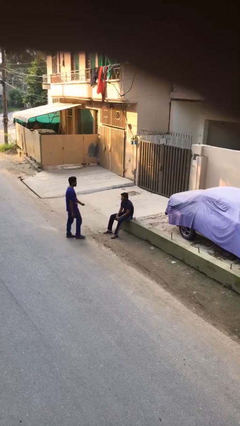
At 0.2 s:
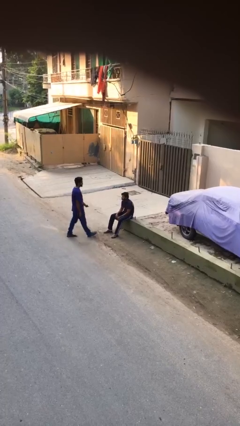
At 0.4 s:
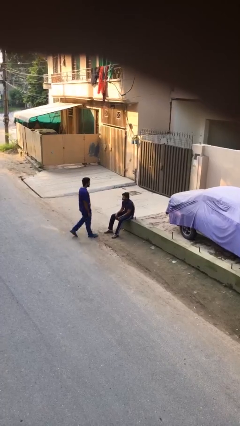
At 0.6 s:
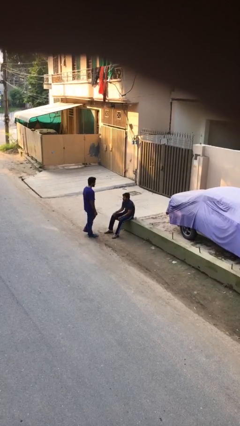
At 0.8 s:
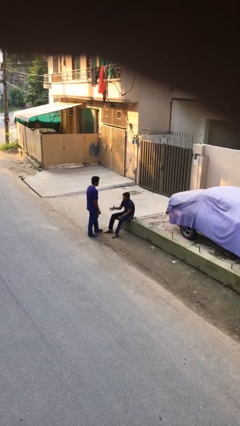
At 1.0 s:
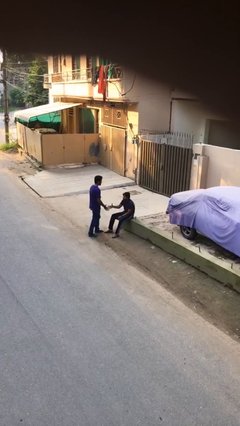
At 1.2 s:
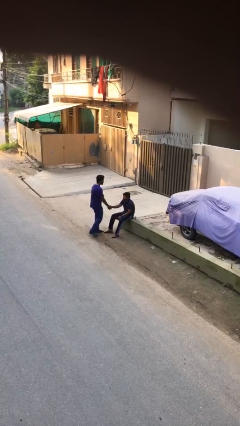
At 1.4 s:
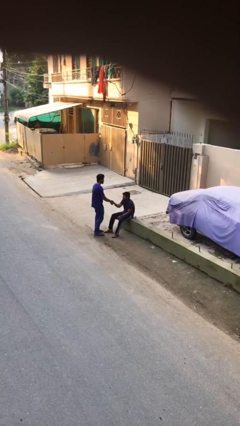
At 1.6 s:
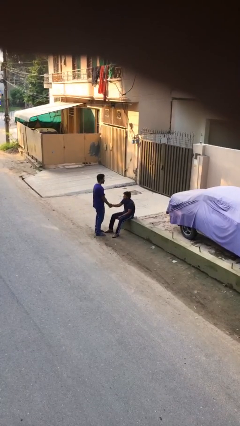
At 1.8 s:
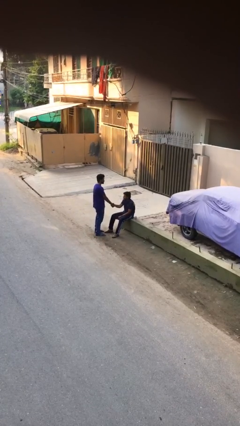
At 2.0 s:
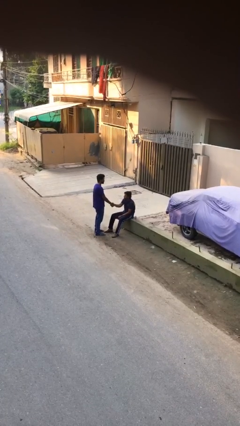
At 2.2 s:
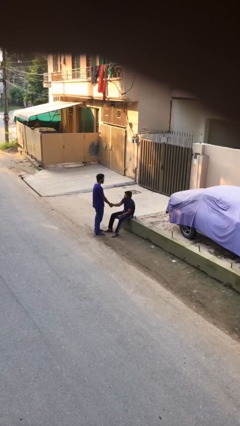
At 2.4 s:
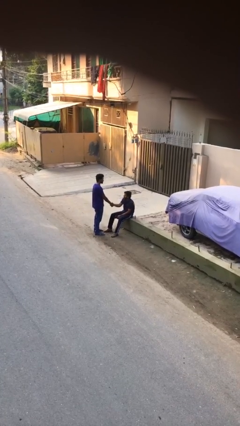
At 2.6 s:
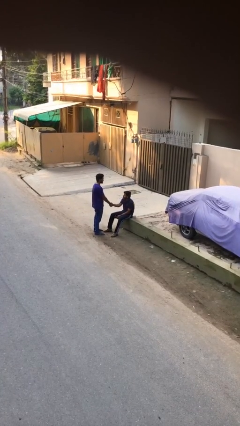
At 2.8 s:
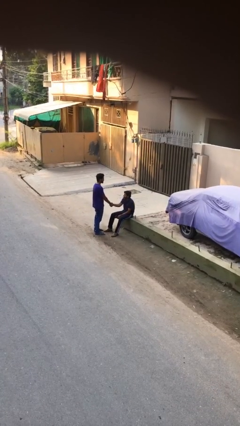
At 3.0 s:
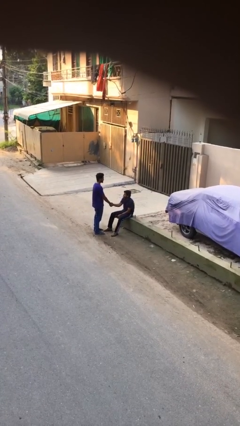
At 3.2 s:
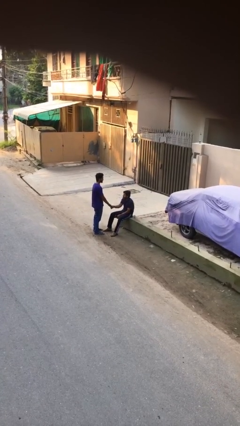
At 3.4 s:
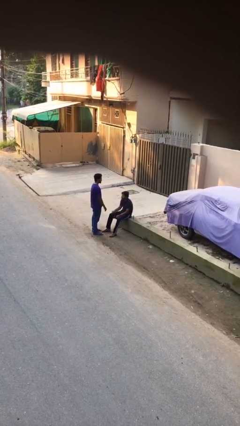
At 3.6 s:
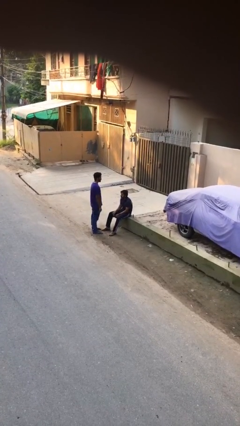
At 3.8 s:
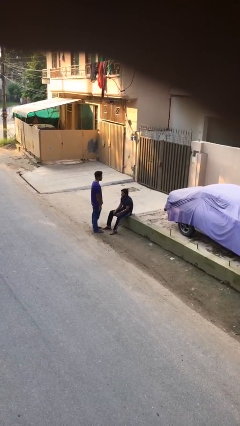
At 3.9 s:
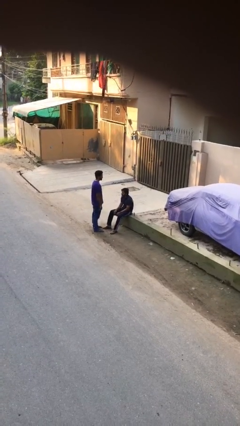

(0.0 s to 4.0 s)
person shakes hand

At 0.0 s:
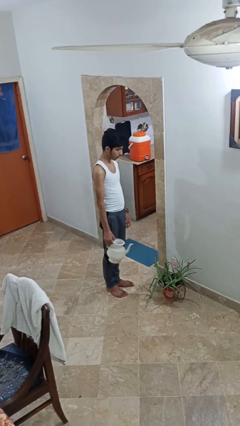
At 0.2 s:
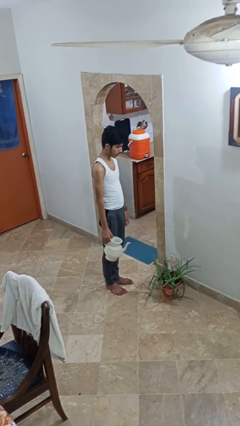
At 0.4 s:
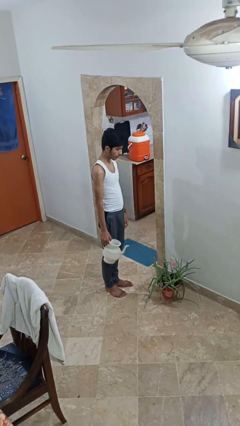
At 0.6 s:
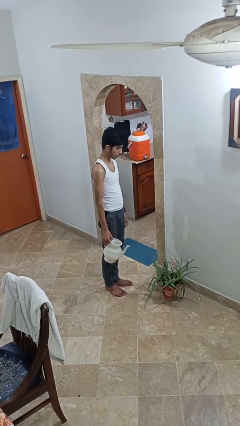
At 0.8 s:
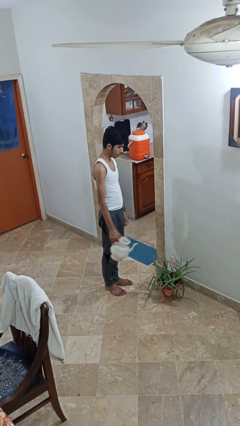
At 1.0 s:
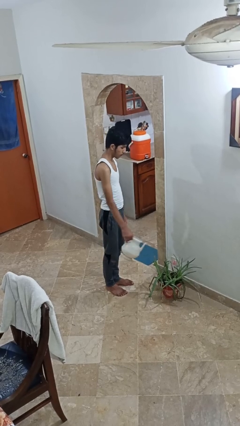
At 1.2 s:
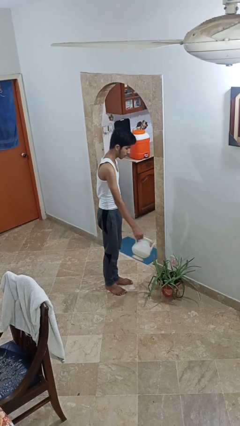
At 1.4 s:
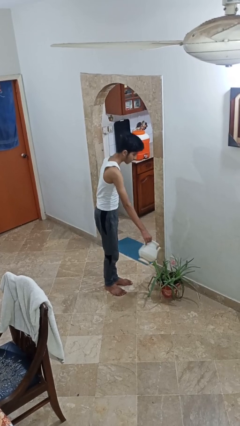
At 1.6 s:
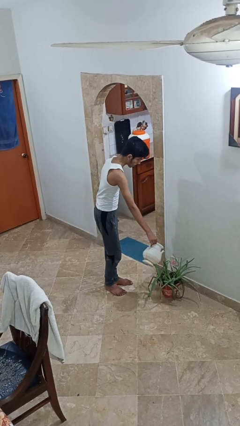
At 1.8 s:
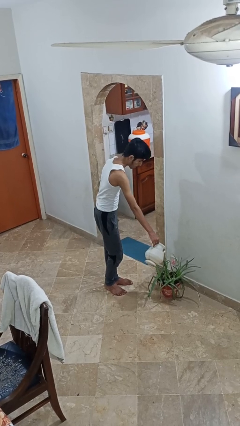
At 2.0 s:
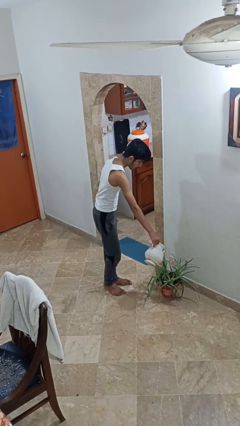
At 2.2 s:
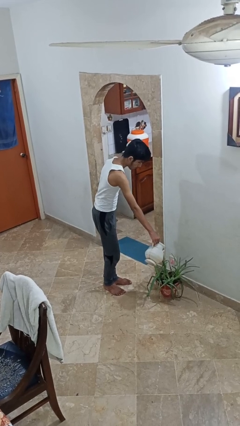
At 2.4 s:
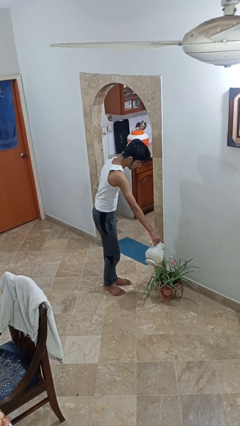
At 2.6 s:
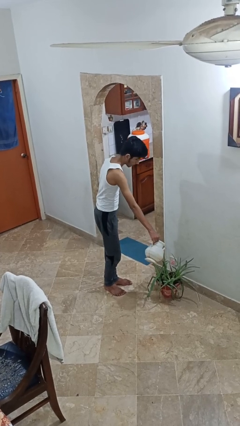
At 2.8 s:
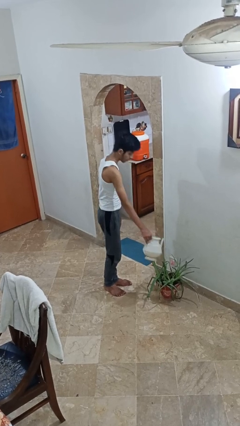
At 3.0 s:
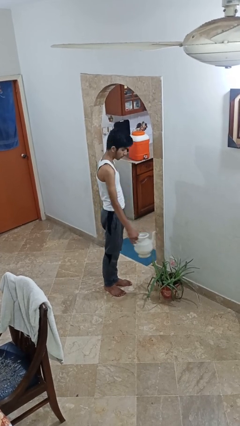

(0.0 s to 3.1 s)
person waters houseplant

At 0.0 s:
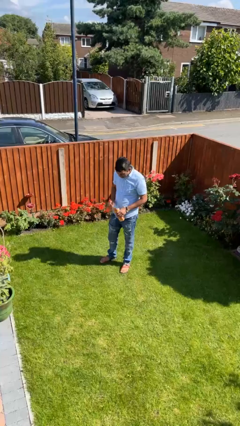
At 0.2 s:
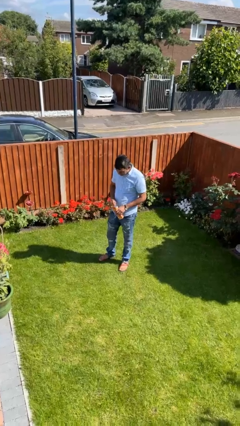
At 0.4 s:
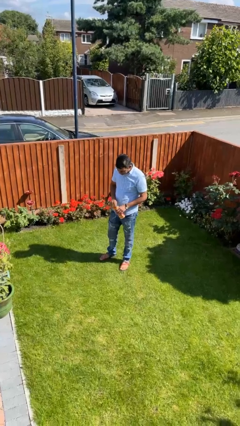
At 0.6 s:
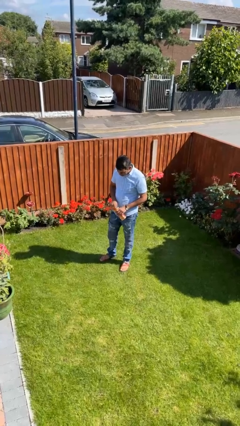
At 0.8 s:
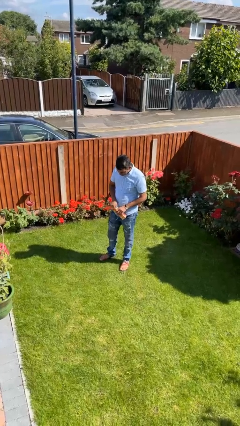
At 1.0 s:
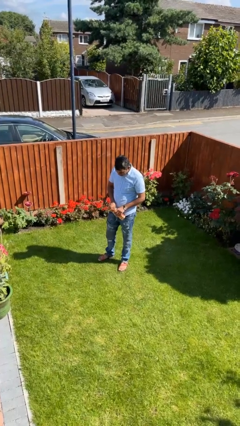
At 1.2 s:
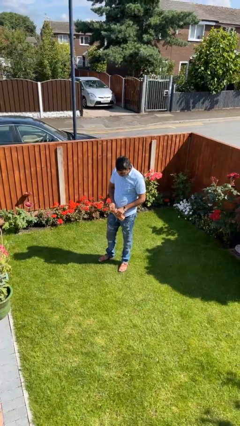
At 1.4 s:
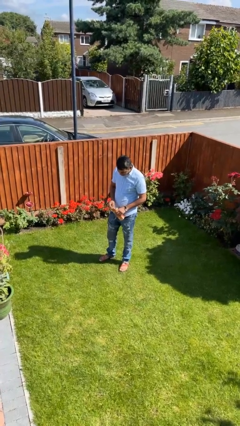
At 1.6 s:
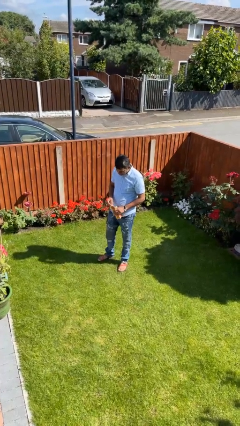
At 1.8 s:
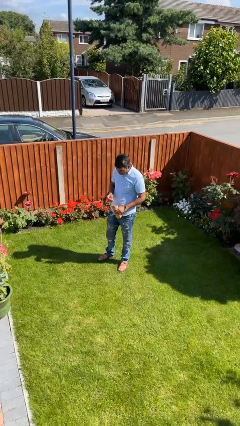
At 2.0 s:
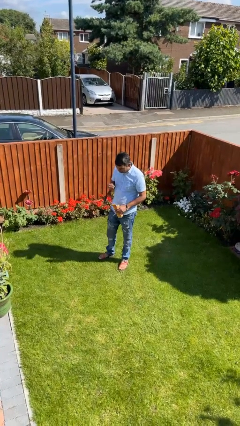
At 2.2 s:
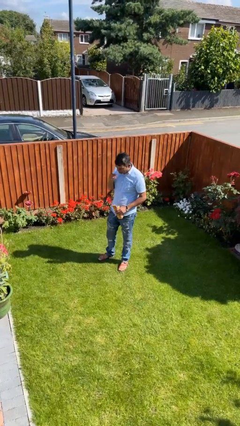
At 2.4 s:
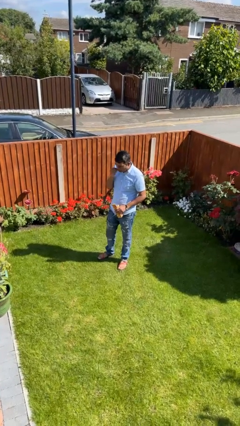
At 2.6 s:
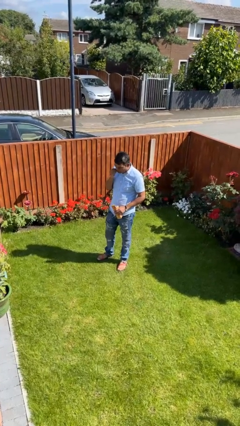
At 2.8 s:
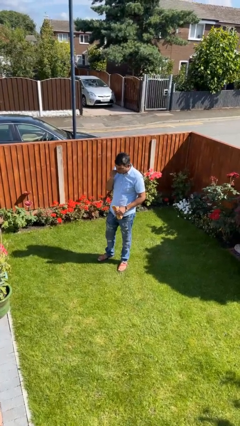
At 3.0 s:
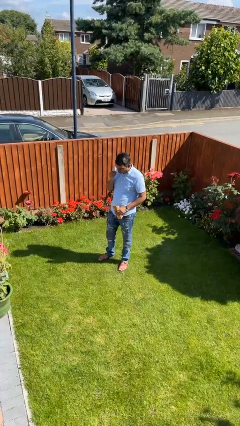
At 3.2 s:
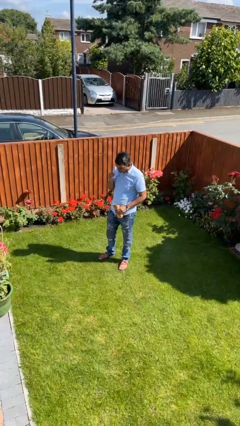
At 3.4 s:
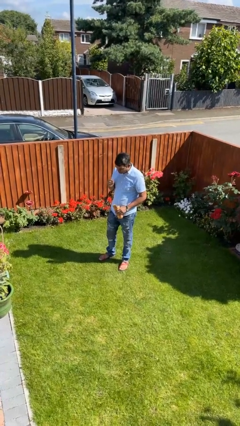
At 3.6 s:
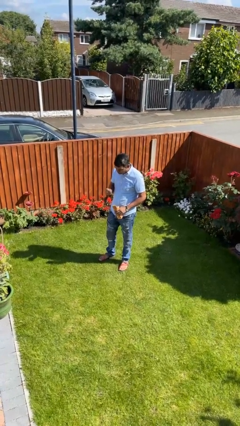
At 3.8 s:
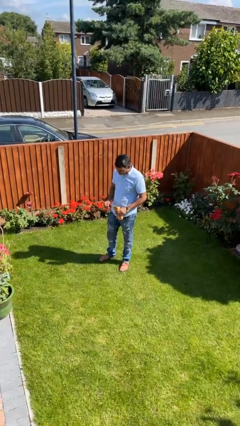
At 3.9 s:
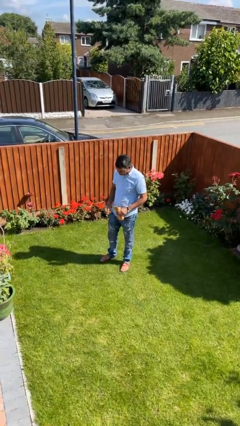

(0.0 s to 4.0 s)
person eats snack from bag

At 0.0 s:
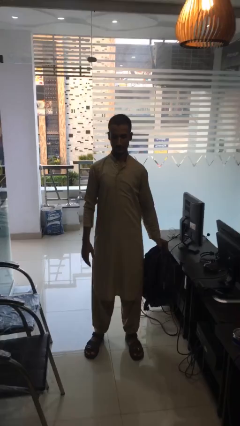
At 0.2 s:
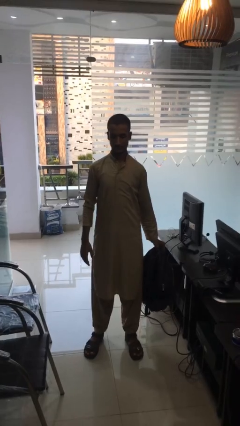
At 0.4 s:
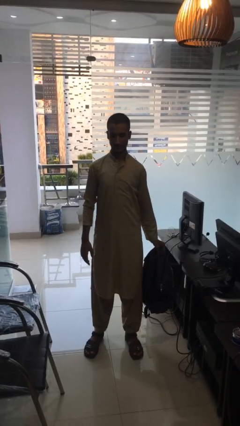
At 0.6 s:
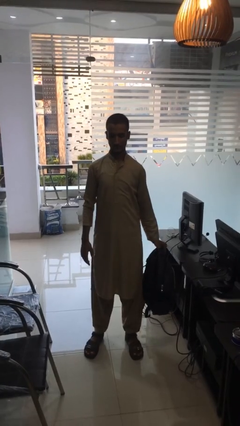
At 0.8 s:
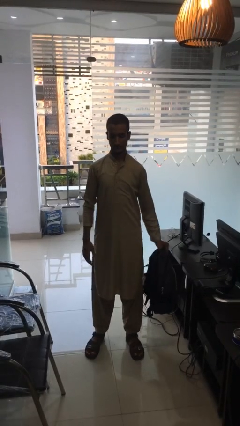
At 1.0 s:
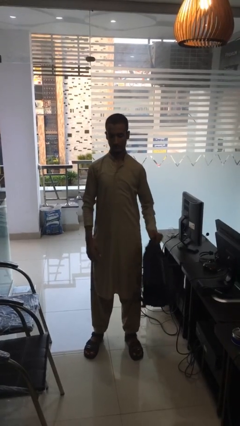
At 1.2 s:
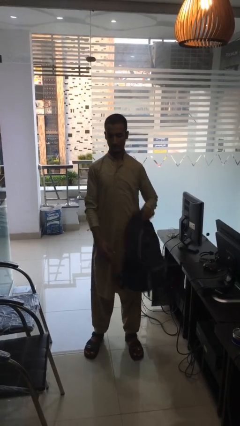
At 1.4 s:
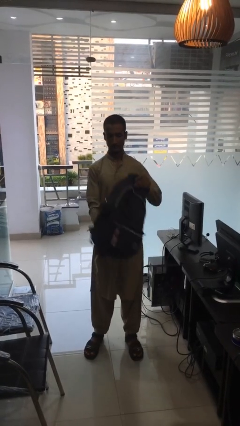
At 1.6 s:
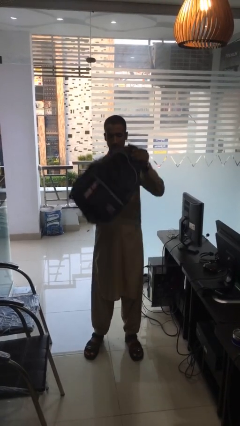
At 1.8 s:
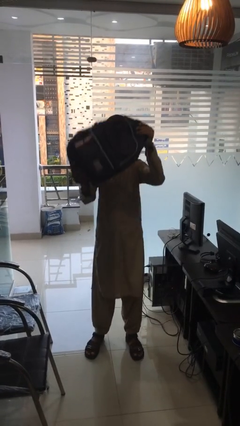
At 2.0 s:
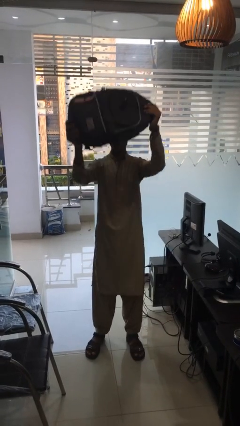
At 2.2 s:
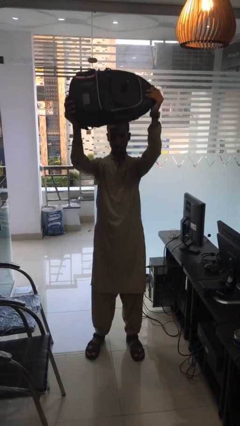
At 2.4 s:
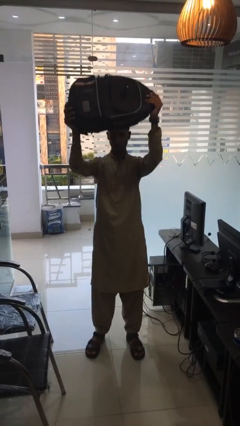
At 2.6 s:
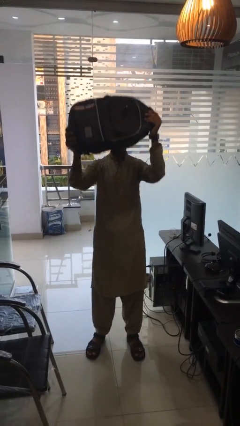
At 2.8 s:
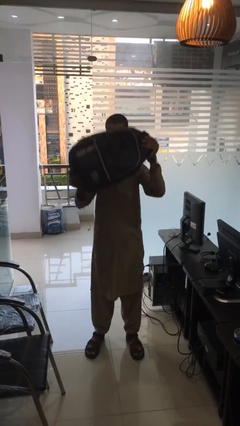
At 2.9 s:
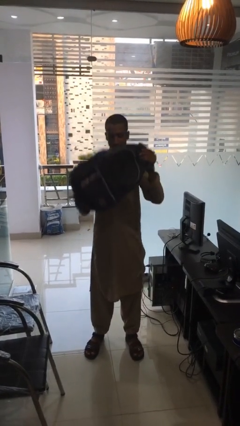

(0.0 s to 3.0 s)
person holds object above head

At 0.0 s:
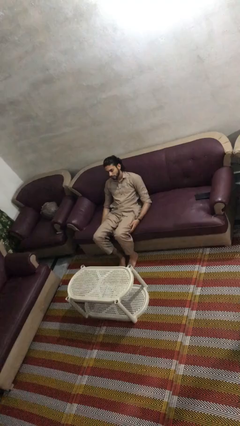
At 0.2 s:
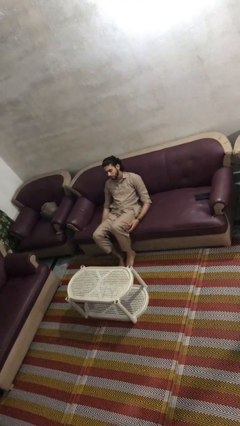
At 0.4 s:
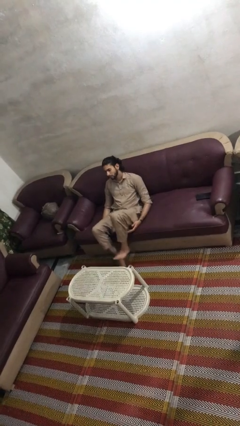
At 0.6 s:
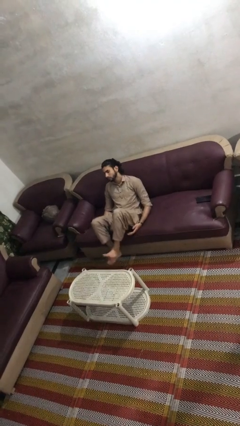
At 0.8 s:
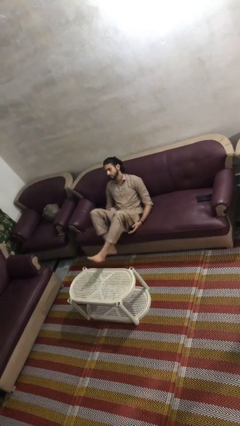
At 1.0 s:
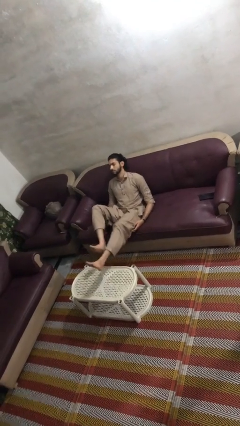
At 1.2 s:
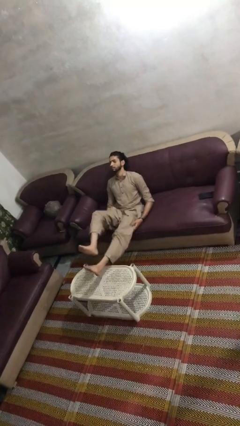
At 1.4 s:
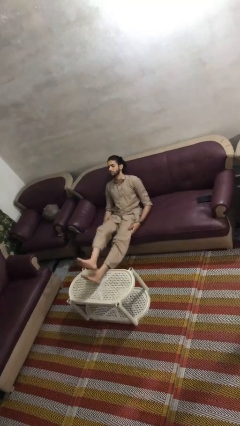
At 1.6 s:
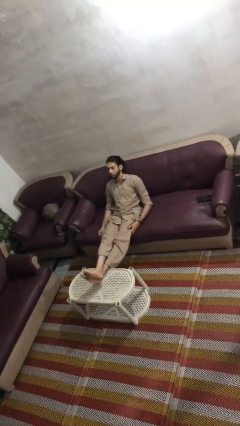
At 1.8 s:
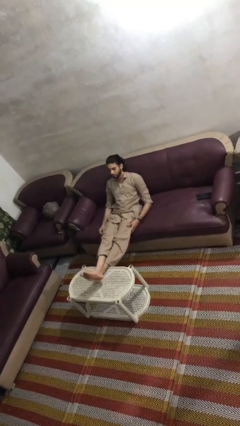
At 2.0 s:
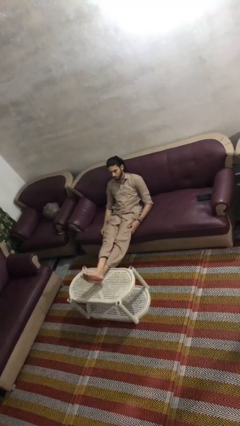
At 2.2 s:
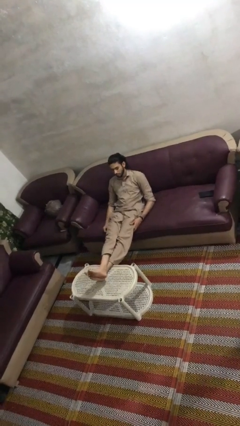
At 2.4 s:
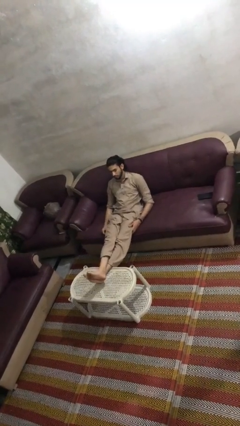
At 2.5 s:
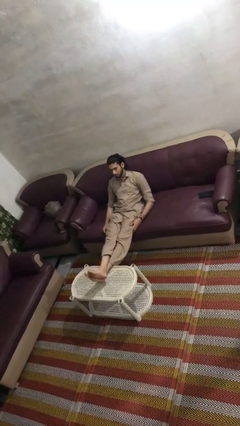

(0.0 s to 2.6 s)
person puts feet up

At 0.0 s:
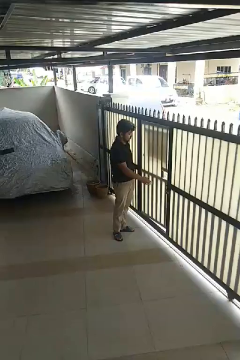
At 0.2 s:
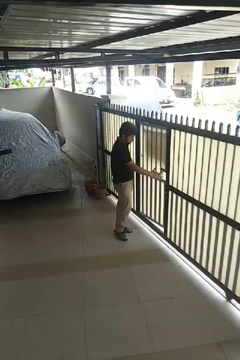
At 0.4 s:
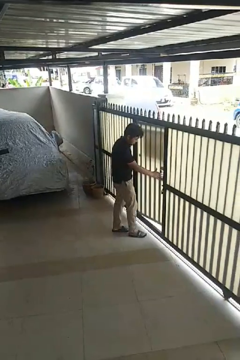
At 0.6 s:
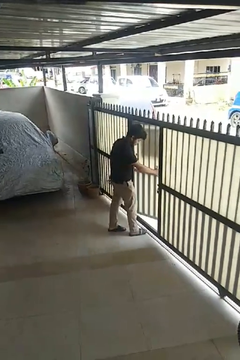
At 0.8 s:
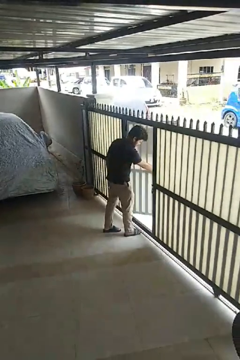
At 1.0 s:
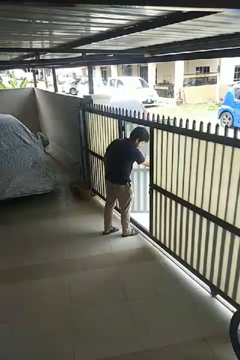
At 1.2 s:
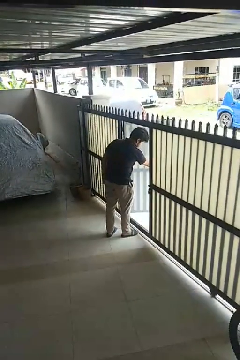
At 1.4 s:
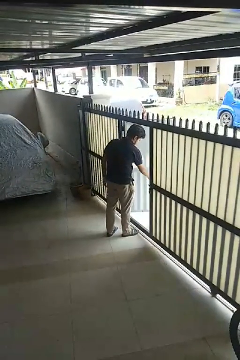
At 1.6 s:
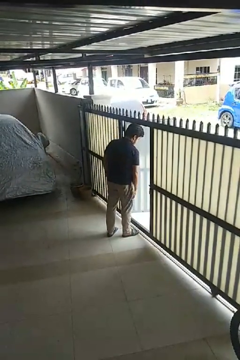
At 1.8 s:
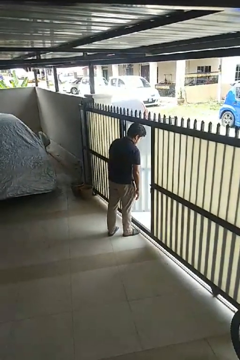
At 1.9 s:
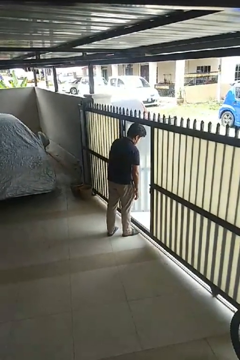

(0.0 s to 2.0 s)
person opens gate
